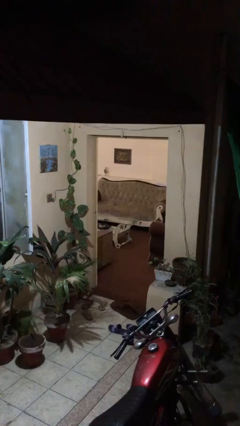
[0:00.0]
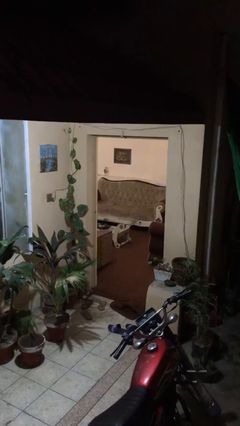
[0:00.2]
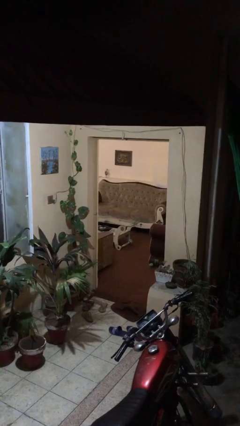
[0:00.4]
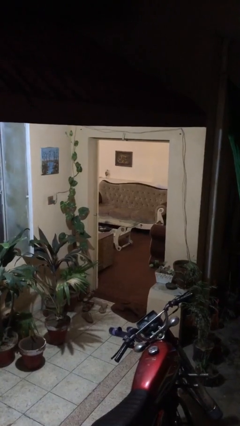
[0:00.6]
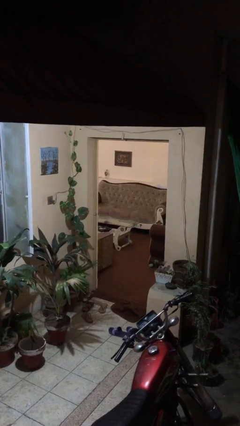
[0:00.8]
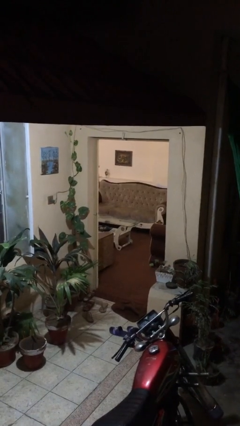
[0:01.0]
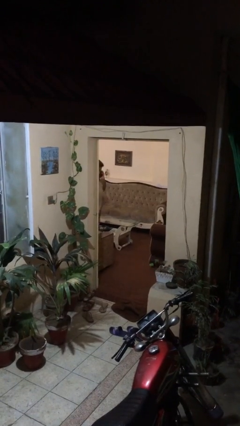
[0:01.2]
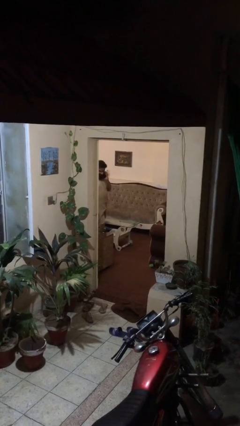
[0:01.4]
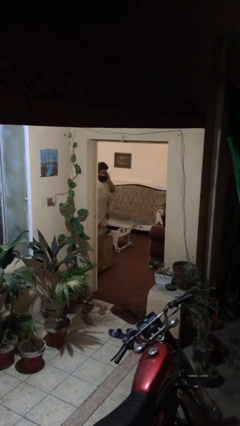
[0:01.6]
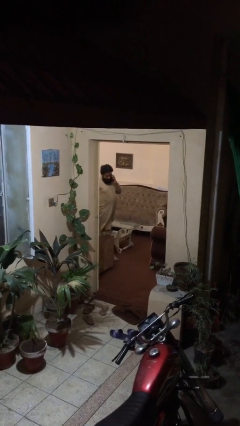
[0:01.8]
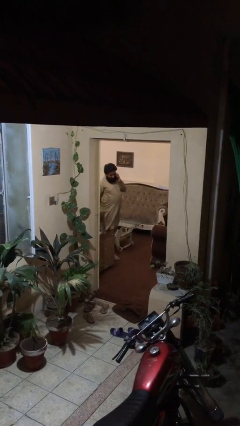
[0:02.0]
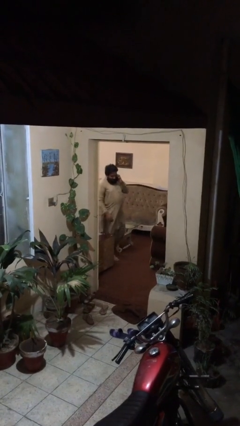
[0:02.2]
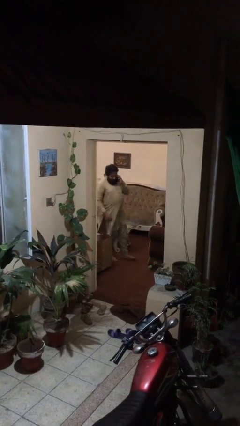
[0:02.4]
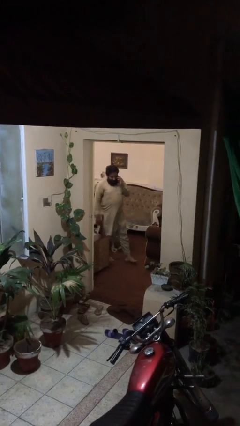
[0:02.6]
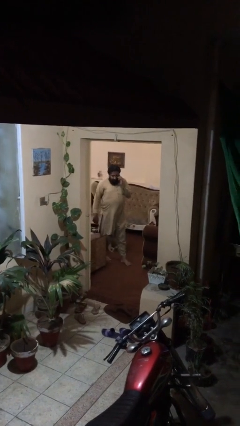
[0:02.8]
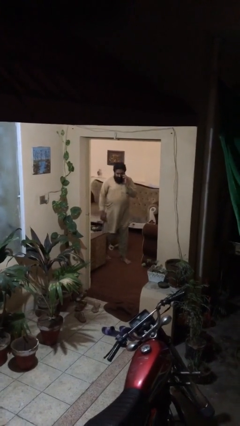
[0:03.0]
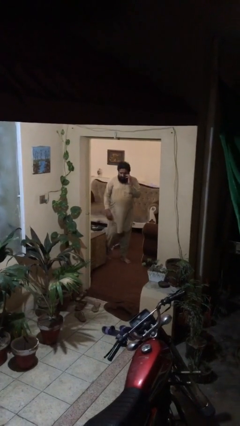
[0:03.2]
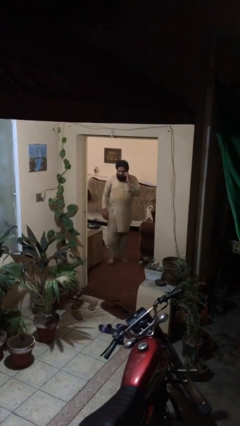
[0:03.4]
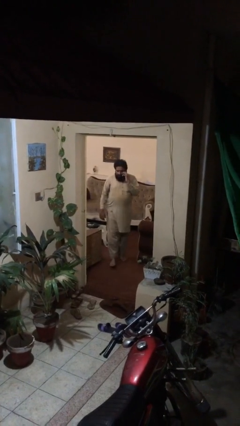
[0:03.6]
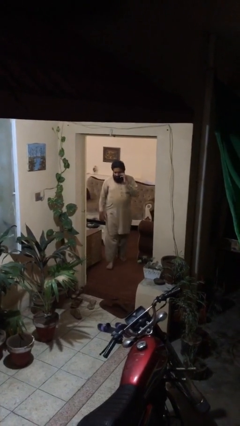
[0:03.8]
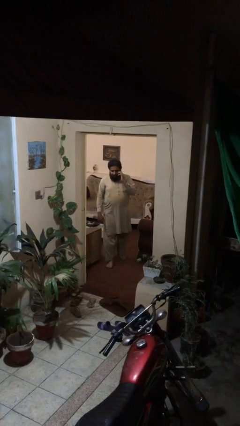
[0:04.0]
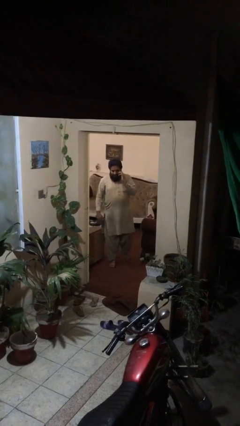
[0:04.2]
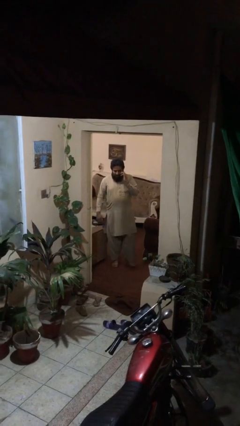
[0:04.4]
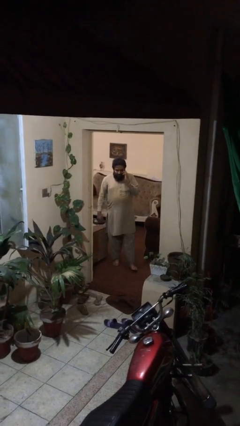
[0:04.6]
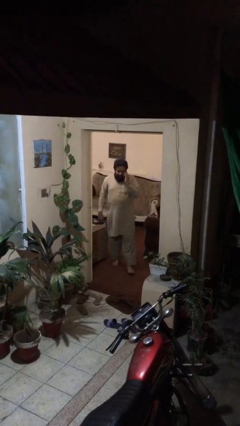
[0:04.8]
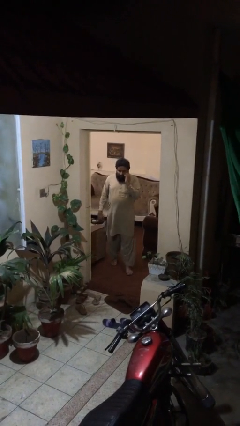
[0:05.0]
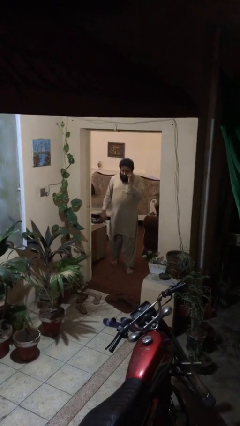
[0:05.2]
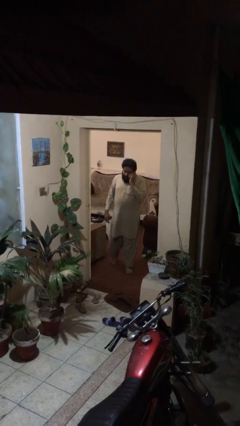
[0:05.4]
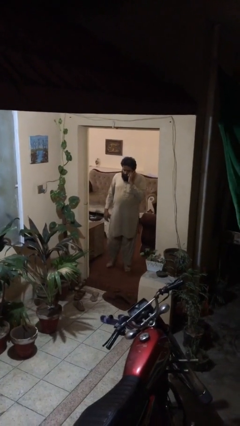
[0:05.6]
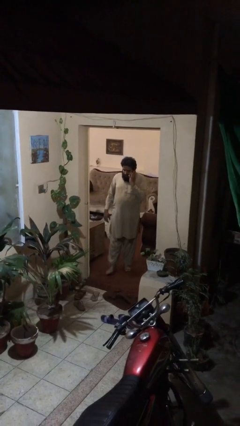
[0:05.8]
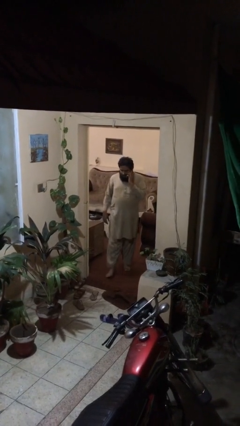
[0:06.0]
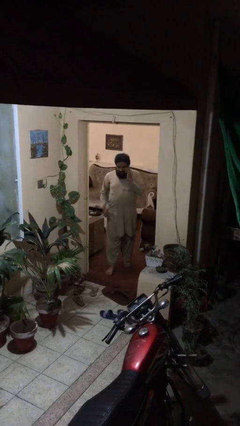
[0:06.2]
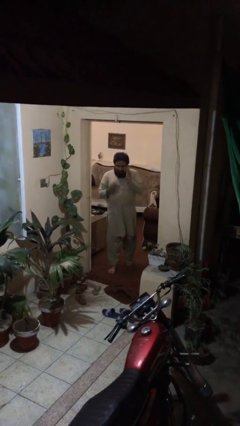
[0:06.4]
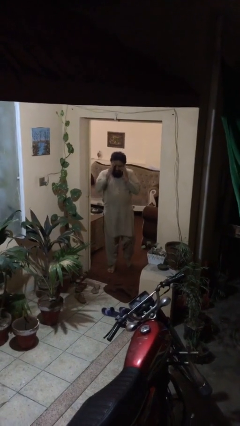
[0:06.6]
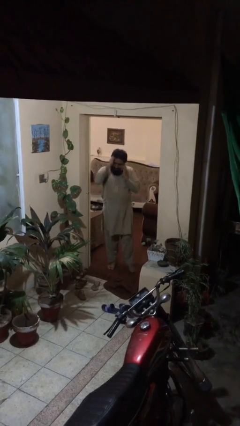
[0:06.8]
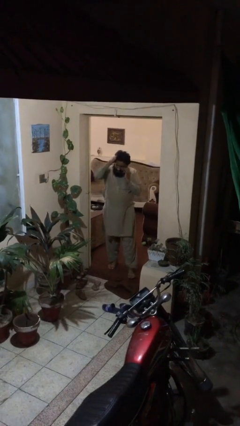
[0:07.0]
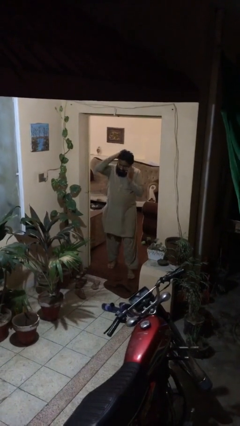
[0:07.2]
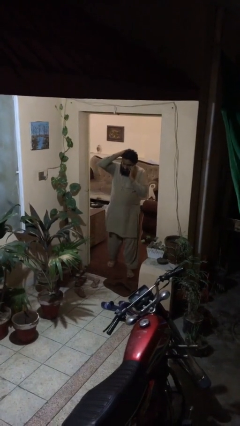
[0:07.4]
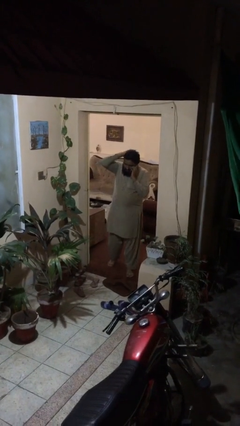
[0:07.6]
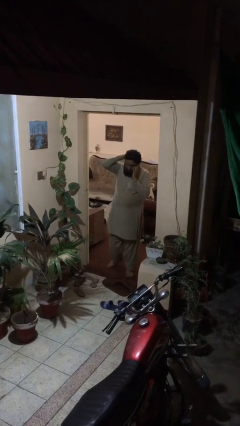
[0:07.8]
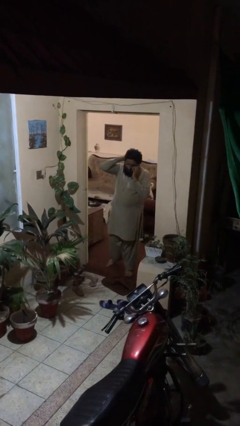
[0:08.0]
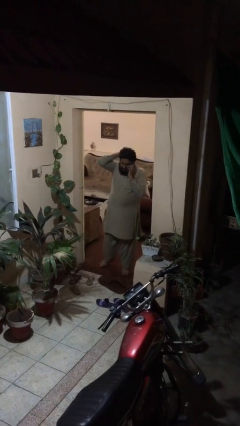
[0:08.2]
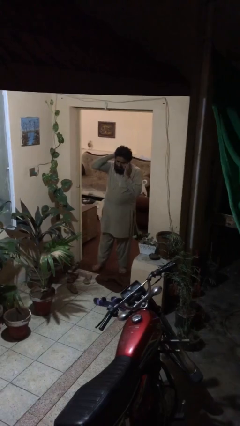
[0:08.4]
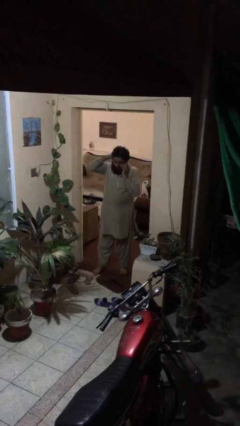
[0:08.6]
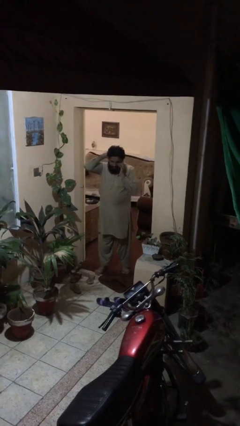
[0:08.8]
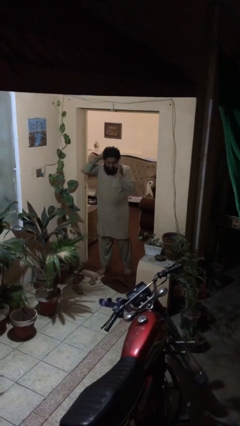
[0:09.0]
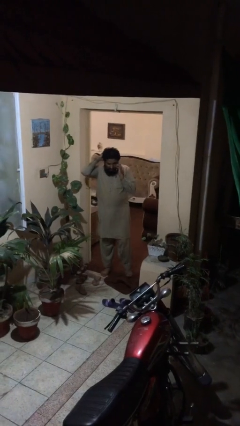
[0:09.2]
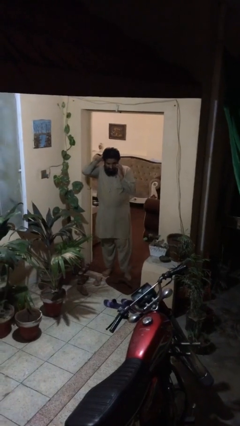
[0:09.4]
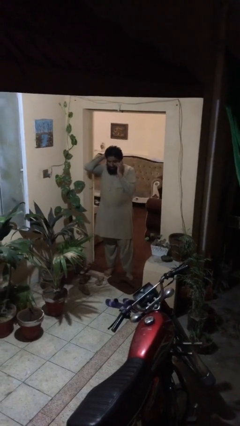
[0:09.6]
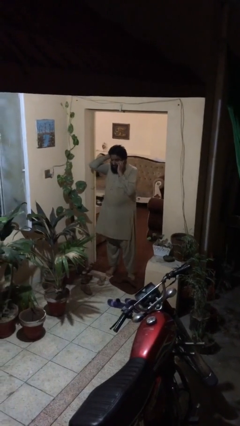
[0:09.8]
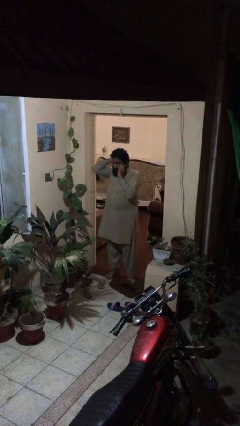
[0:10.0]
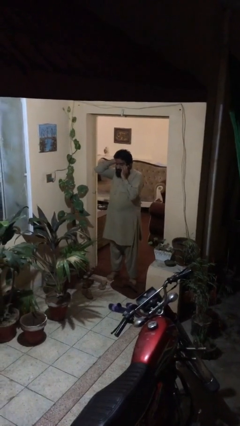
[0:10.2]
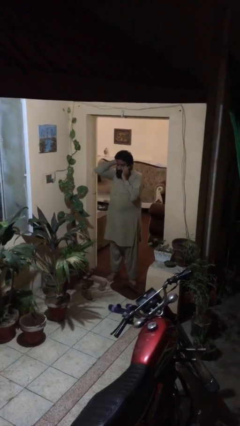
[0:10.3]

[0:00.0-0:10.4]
person enters scene through structure

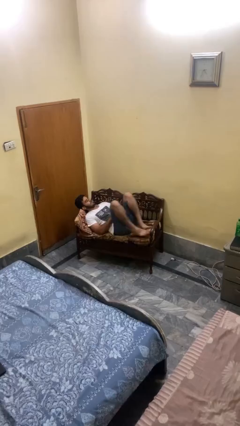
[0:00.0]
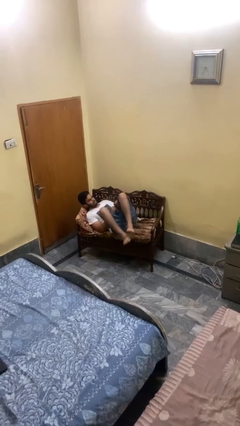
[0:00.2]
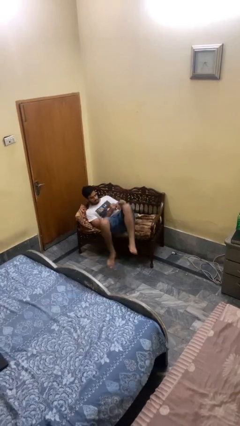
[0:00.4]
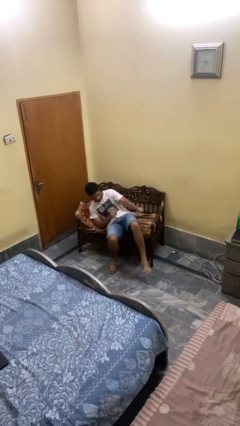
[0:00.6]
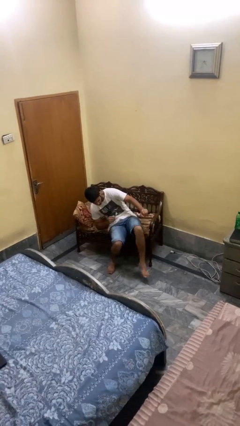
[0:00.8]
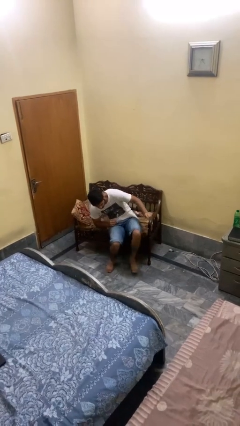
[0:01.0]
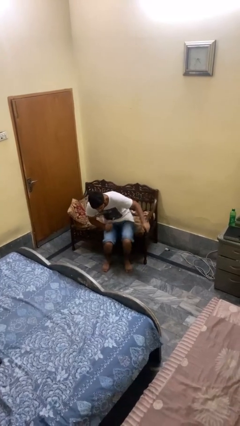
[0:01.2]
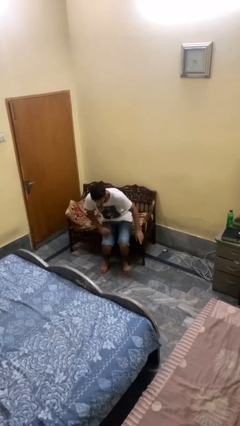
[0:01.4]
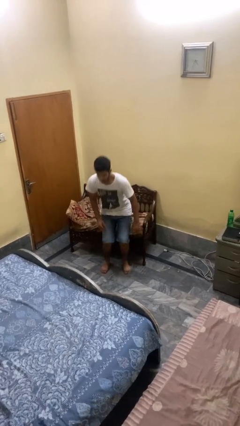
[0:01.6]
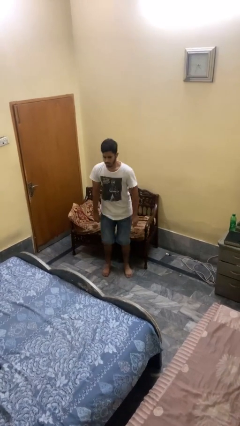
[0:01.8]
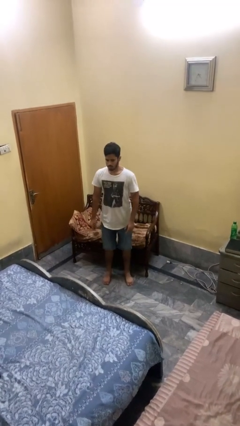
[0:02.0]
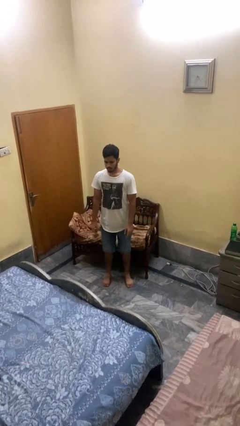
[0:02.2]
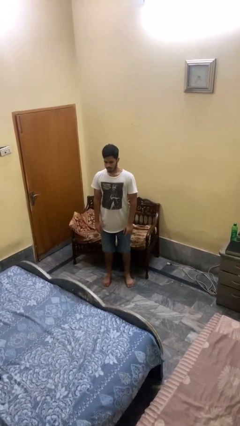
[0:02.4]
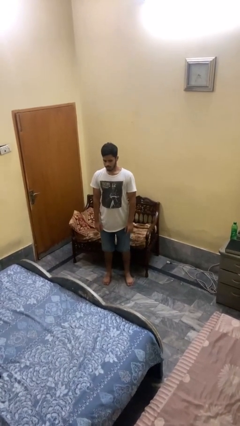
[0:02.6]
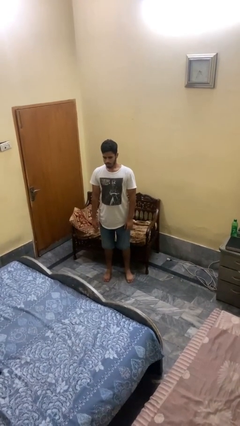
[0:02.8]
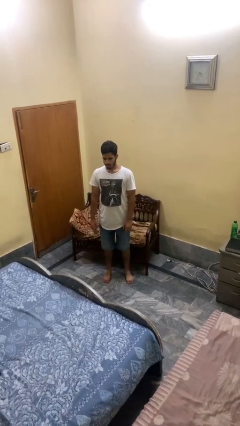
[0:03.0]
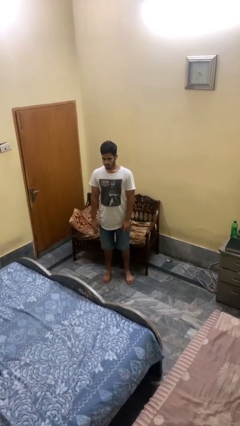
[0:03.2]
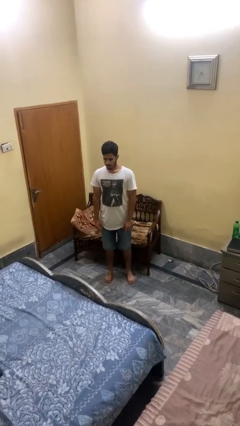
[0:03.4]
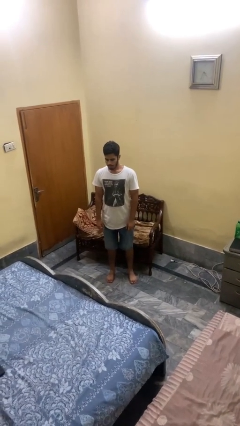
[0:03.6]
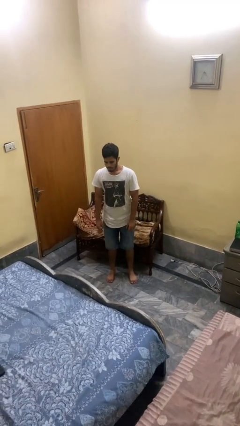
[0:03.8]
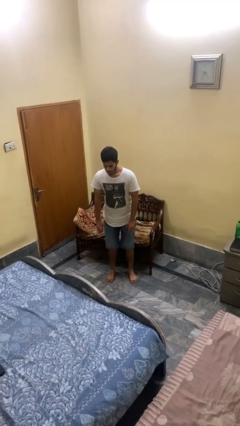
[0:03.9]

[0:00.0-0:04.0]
person stands up

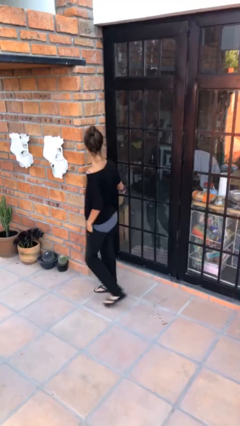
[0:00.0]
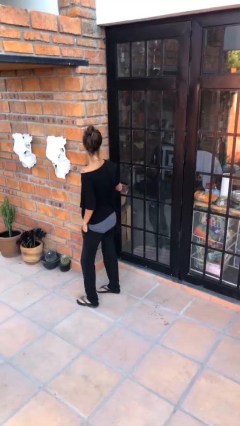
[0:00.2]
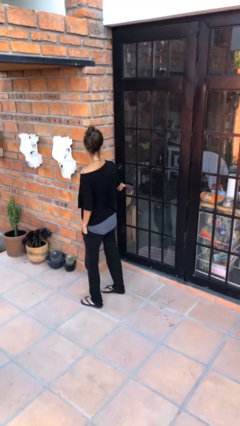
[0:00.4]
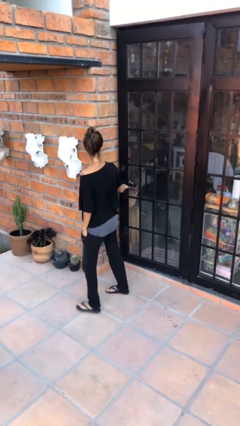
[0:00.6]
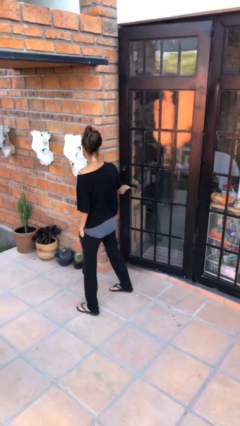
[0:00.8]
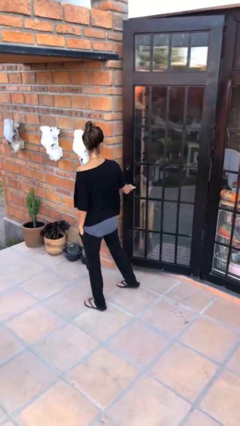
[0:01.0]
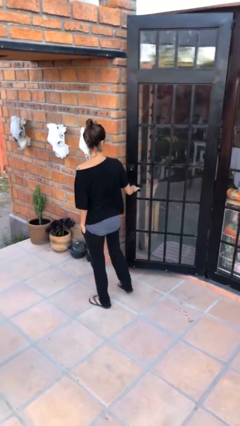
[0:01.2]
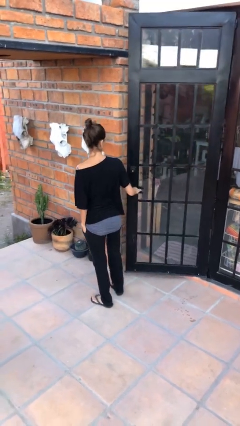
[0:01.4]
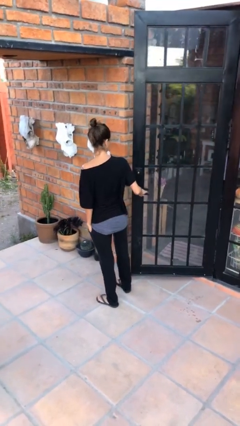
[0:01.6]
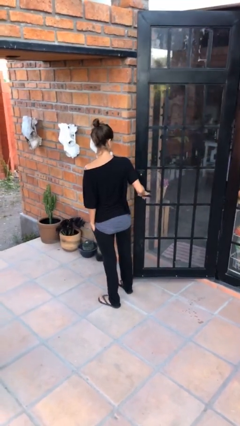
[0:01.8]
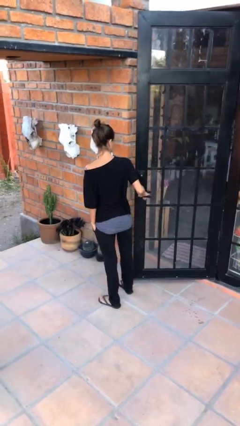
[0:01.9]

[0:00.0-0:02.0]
person opens facility door

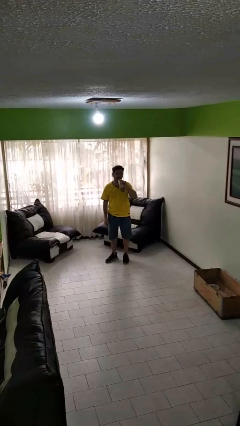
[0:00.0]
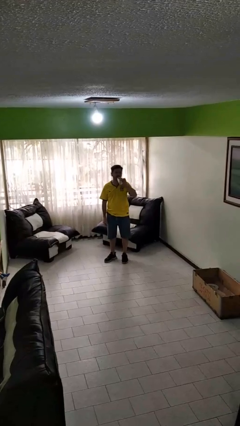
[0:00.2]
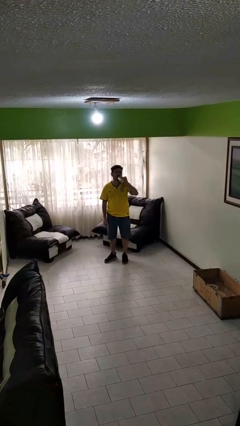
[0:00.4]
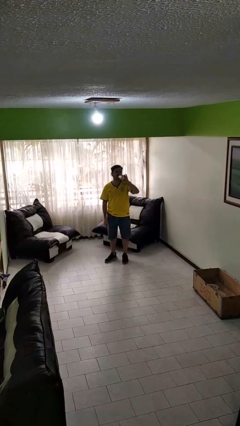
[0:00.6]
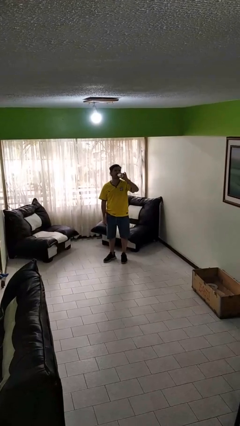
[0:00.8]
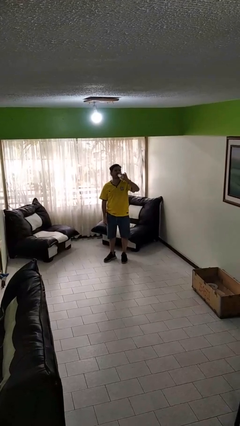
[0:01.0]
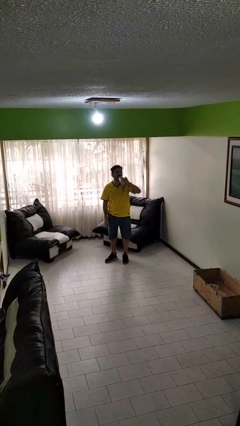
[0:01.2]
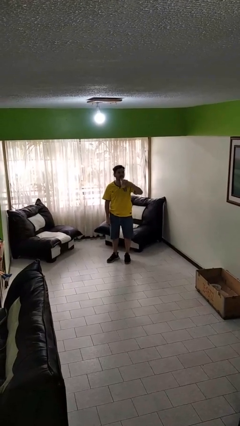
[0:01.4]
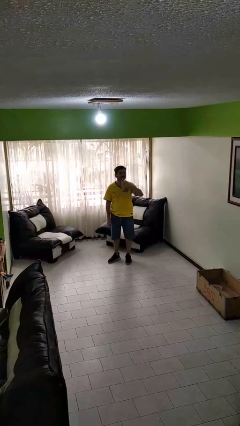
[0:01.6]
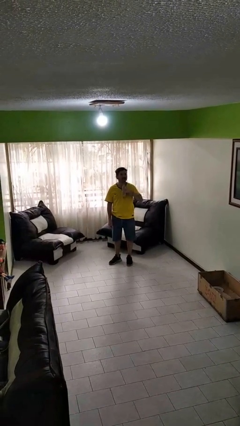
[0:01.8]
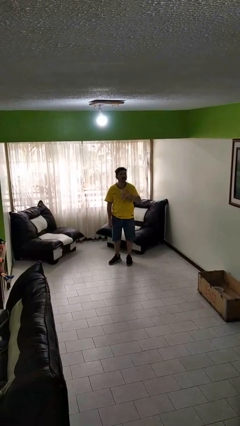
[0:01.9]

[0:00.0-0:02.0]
person drinks from bottle
